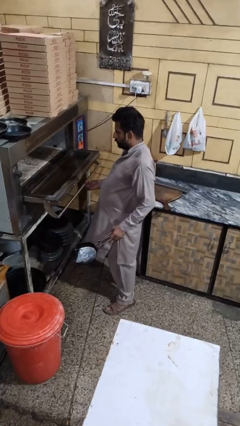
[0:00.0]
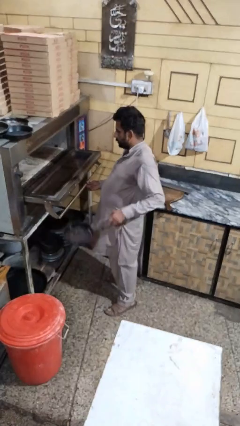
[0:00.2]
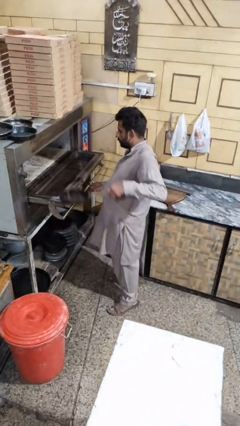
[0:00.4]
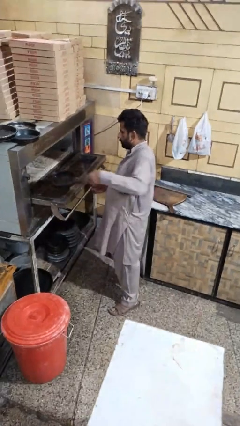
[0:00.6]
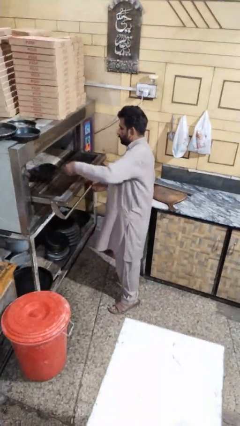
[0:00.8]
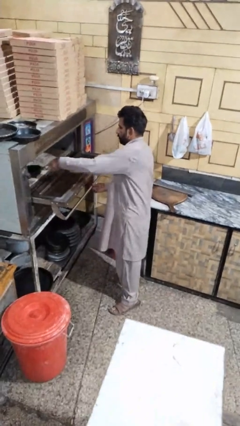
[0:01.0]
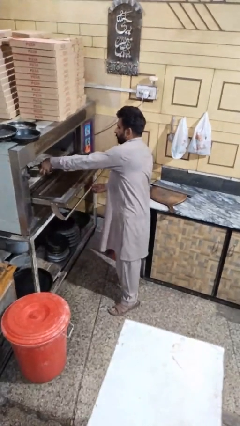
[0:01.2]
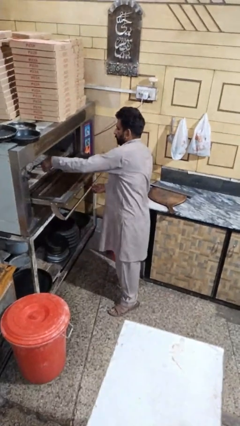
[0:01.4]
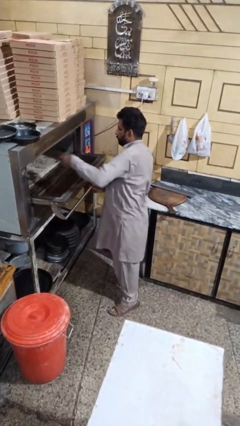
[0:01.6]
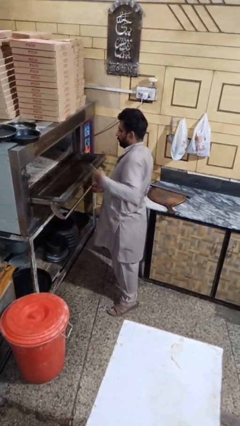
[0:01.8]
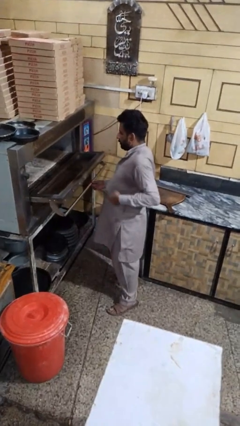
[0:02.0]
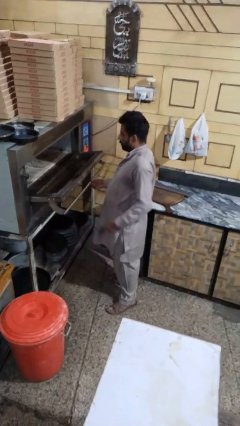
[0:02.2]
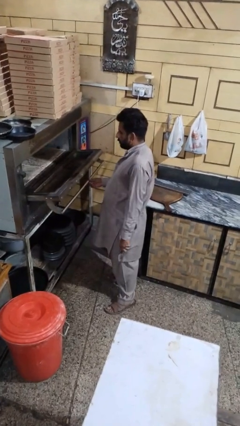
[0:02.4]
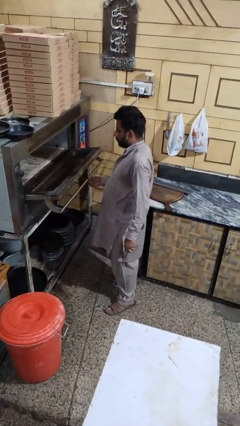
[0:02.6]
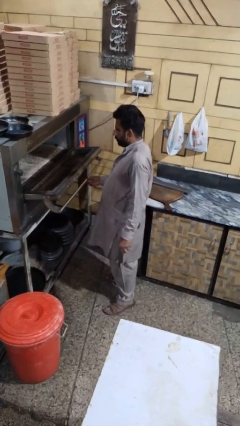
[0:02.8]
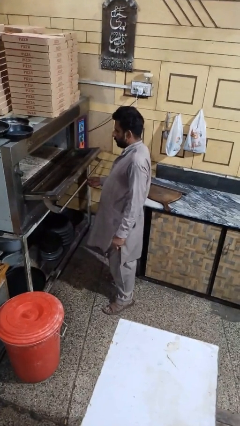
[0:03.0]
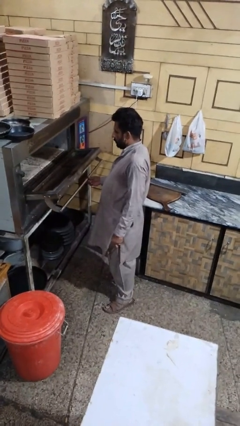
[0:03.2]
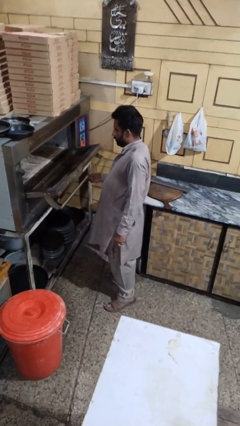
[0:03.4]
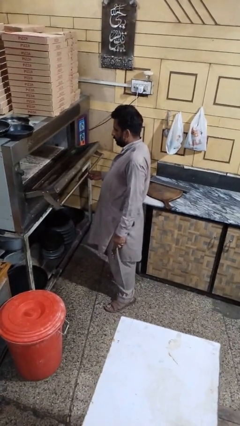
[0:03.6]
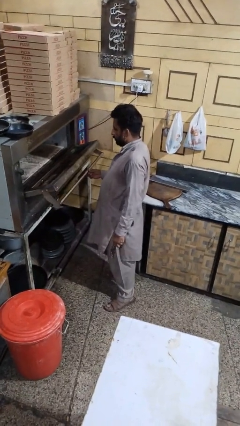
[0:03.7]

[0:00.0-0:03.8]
person puts object into microwave

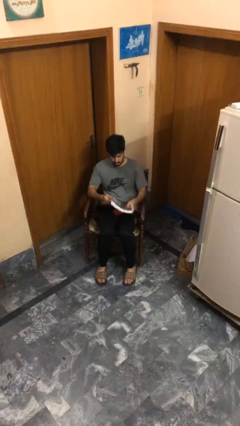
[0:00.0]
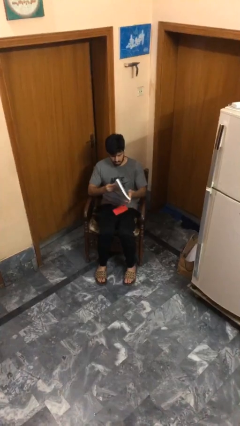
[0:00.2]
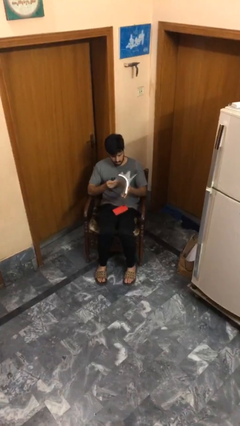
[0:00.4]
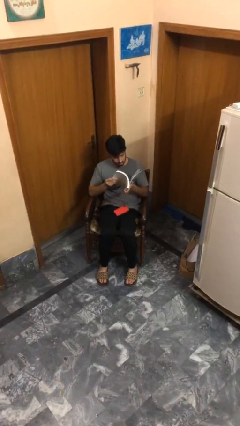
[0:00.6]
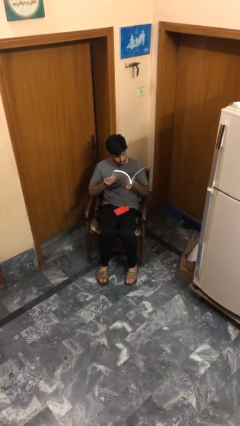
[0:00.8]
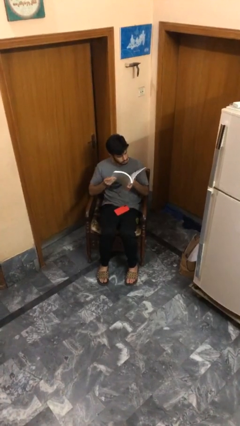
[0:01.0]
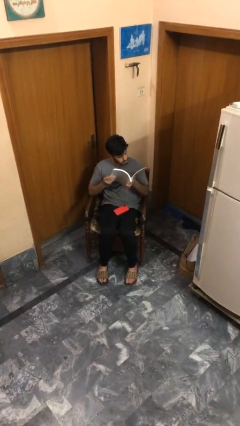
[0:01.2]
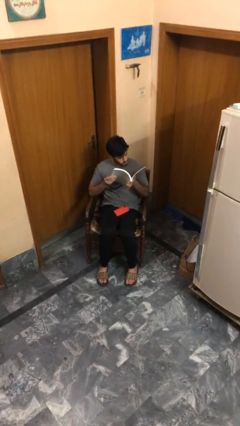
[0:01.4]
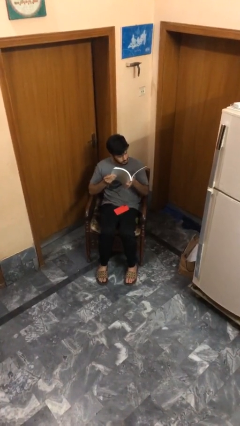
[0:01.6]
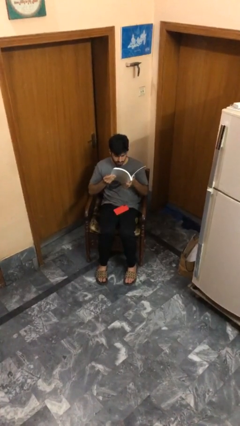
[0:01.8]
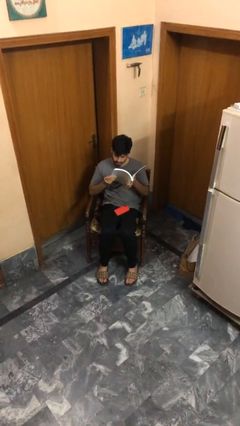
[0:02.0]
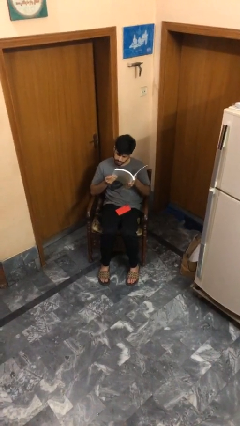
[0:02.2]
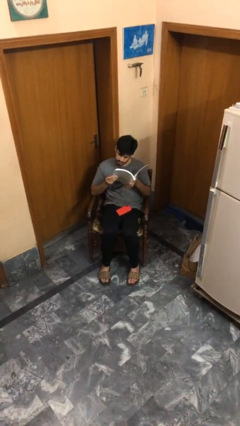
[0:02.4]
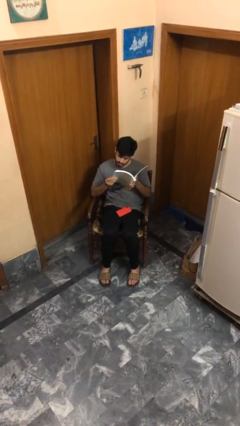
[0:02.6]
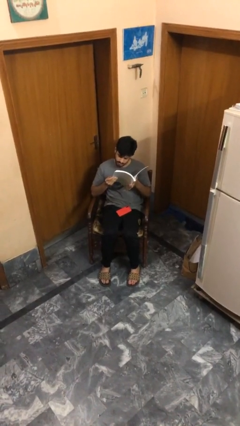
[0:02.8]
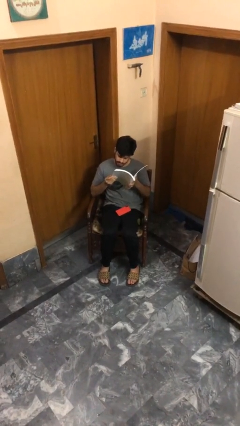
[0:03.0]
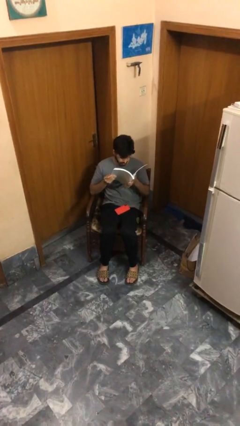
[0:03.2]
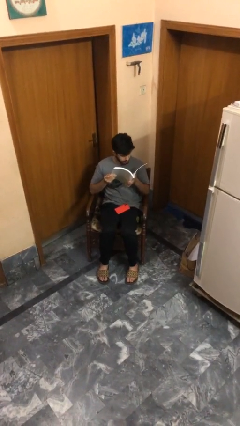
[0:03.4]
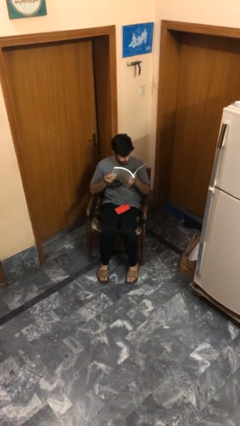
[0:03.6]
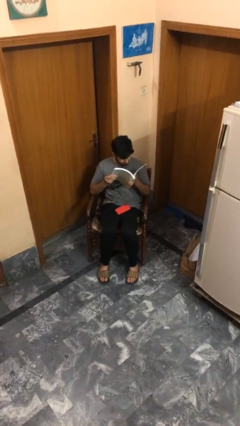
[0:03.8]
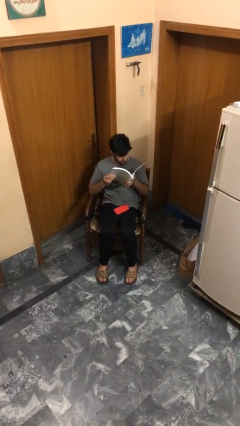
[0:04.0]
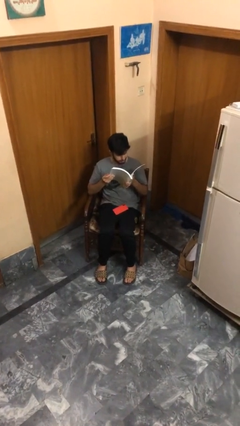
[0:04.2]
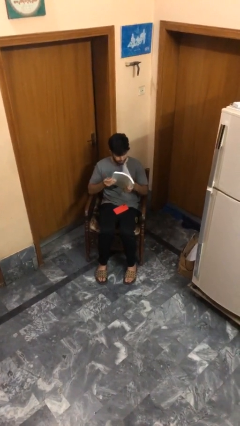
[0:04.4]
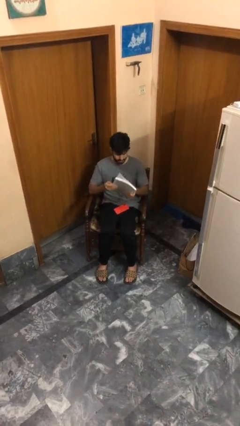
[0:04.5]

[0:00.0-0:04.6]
person reads book

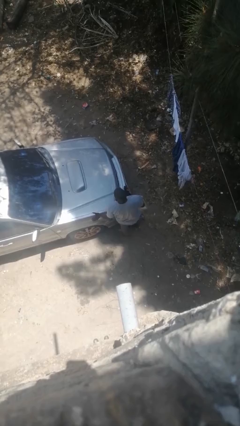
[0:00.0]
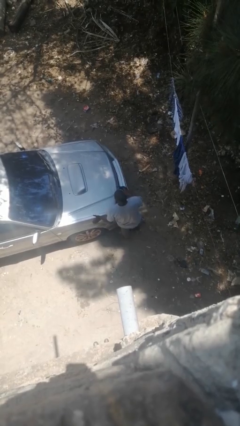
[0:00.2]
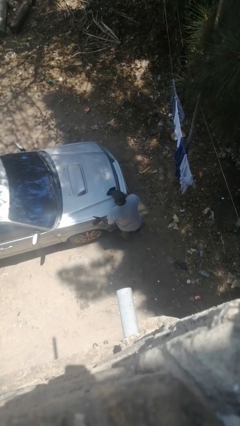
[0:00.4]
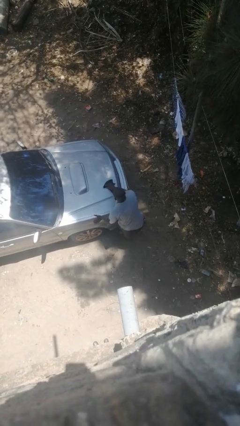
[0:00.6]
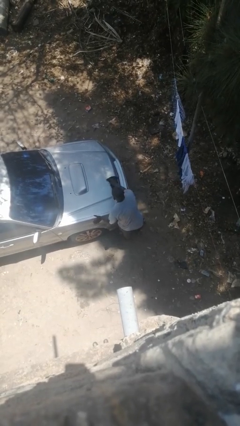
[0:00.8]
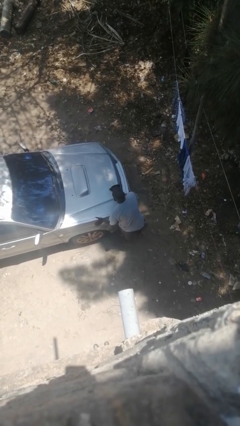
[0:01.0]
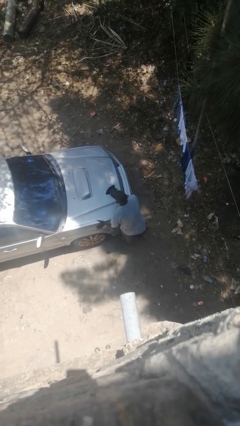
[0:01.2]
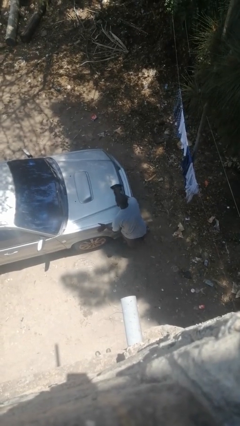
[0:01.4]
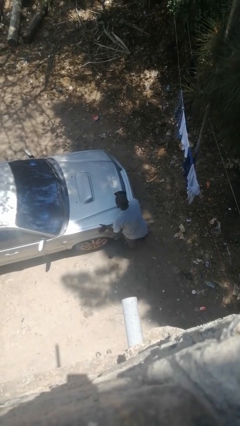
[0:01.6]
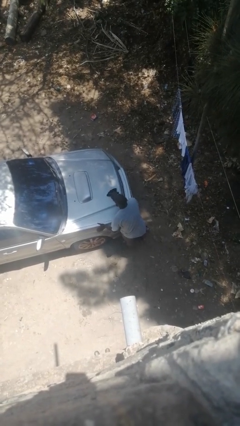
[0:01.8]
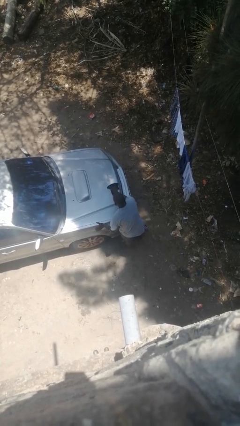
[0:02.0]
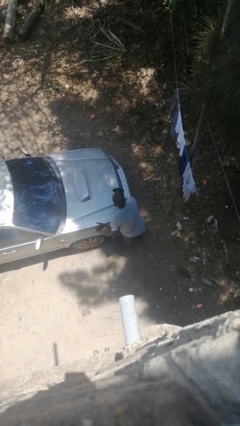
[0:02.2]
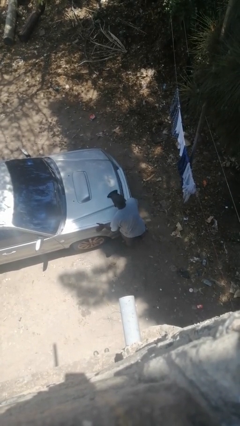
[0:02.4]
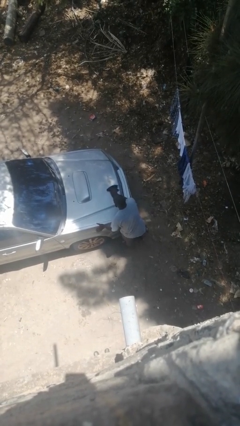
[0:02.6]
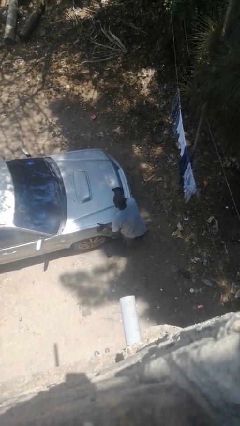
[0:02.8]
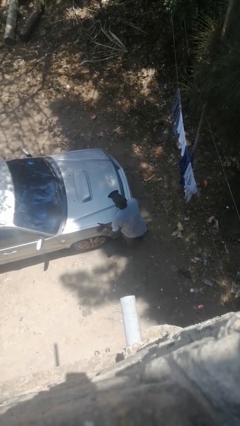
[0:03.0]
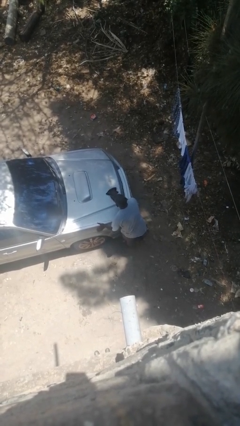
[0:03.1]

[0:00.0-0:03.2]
person polishes car with rag

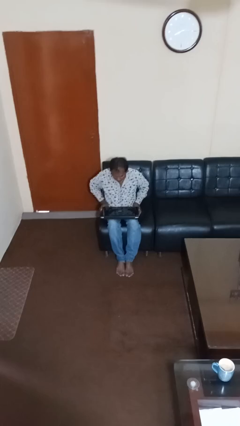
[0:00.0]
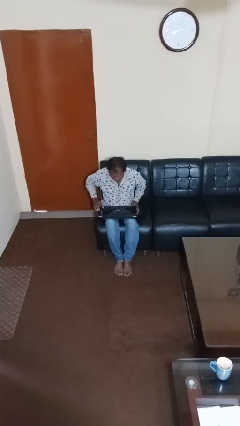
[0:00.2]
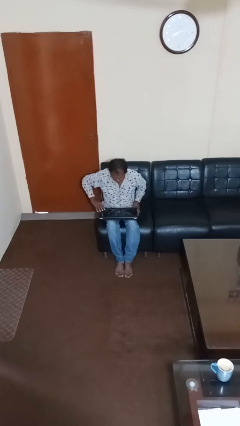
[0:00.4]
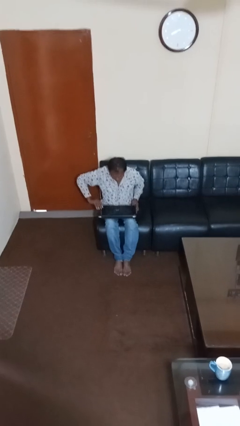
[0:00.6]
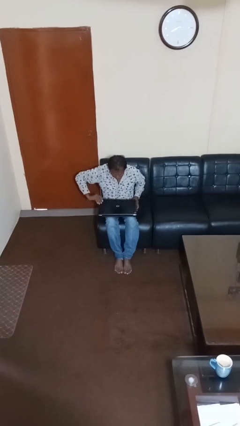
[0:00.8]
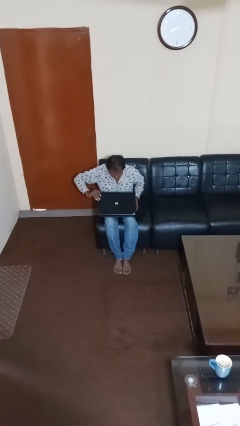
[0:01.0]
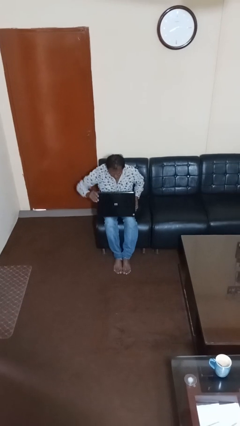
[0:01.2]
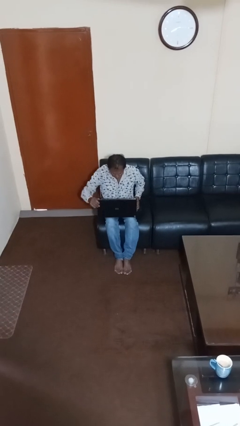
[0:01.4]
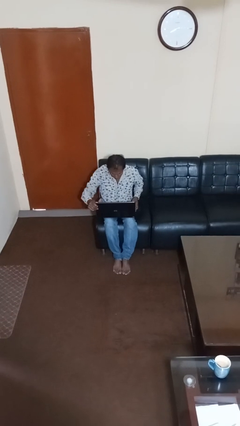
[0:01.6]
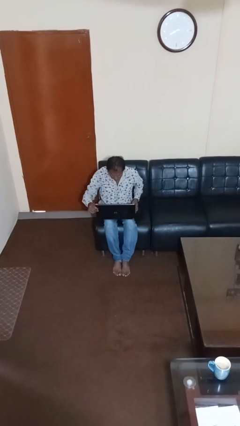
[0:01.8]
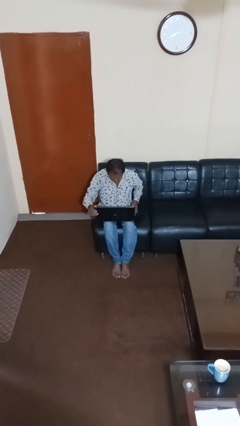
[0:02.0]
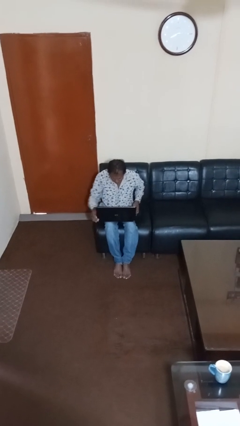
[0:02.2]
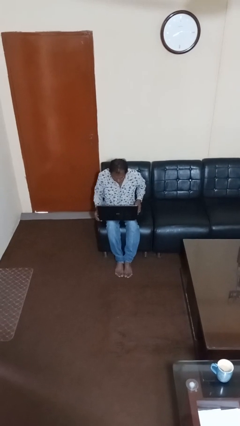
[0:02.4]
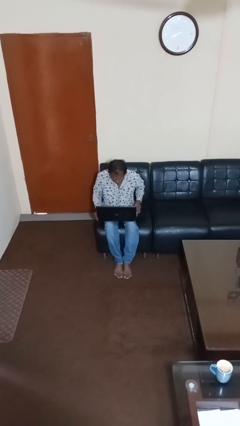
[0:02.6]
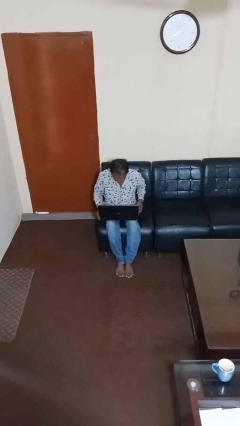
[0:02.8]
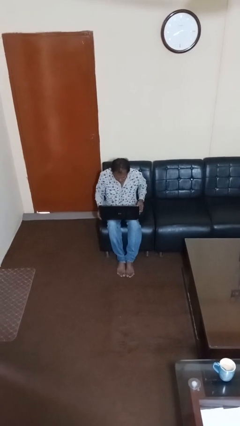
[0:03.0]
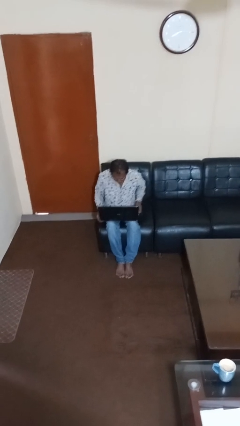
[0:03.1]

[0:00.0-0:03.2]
person opens laptop

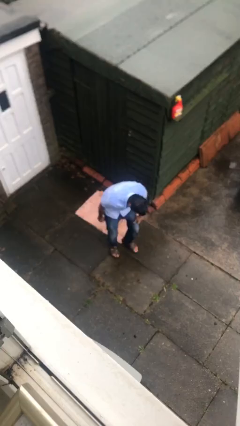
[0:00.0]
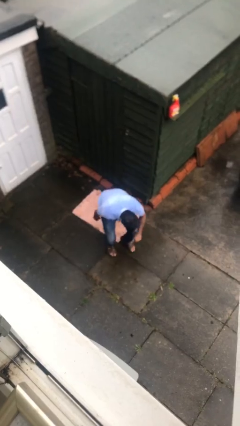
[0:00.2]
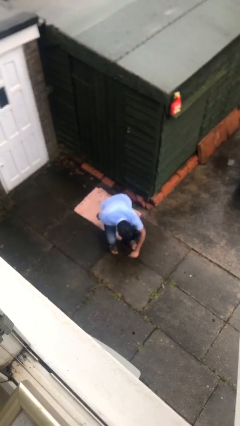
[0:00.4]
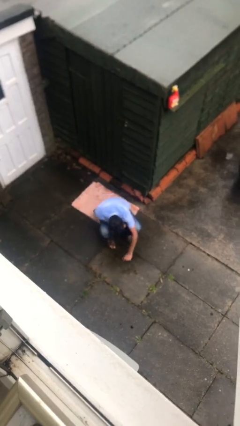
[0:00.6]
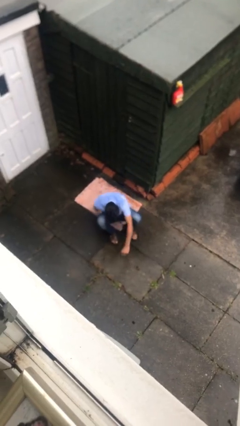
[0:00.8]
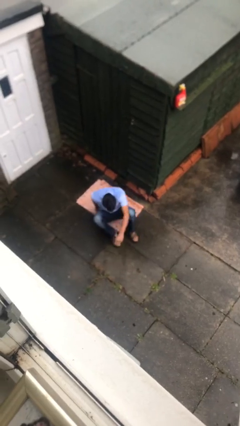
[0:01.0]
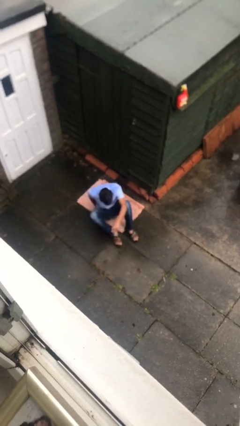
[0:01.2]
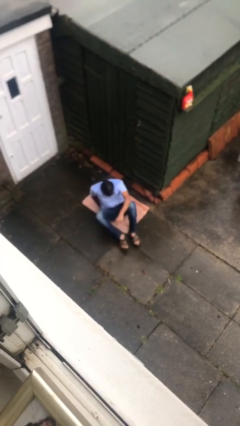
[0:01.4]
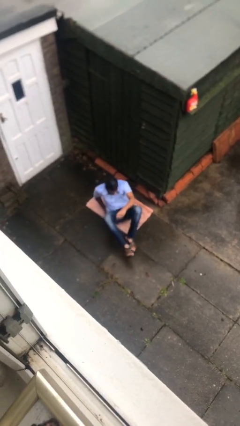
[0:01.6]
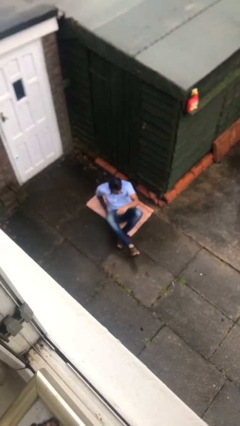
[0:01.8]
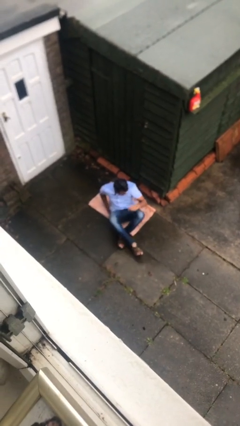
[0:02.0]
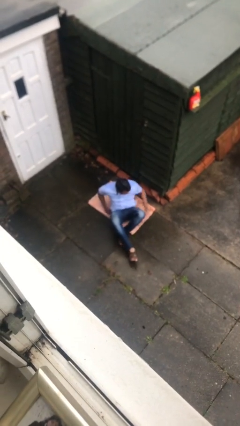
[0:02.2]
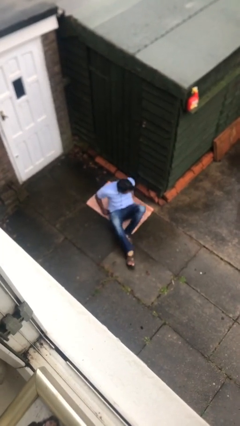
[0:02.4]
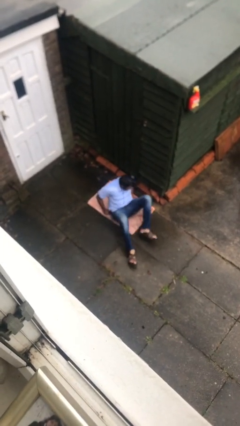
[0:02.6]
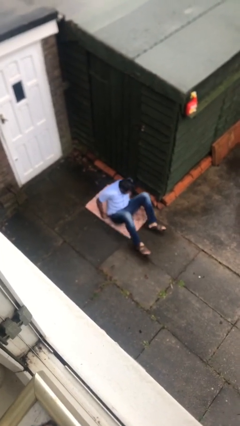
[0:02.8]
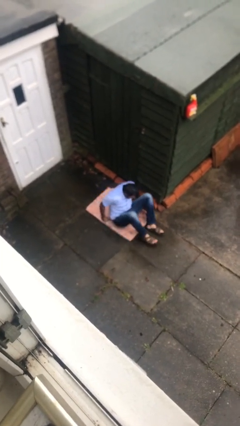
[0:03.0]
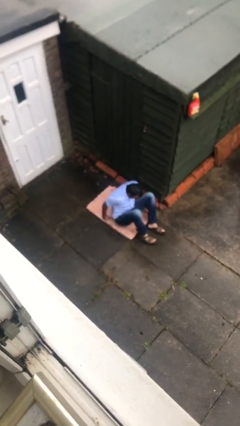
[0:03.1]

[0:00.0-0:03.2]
person sits down
